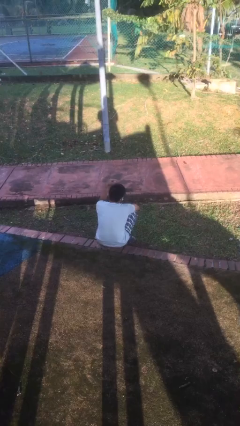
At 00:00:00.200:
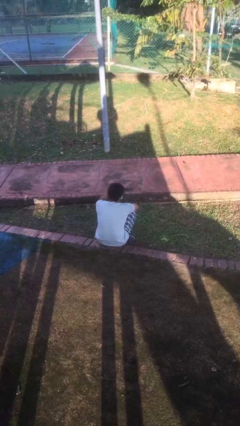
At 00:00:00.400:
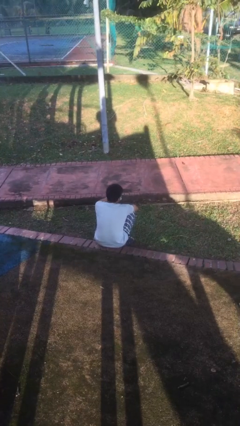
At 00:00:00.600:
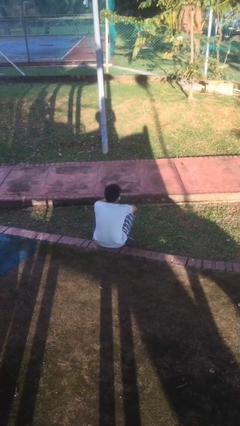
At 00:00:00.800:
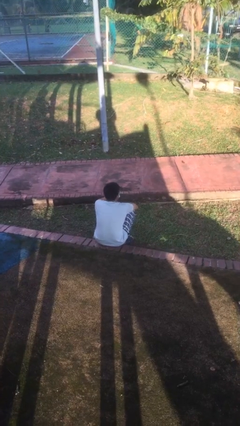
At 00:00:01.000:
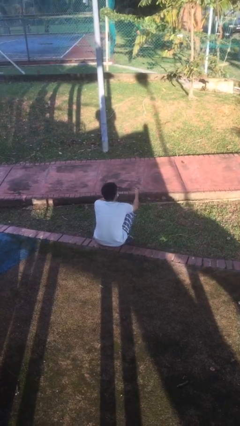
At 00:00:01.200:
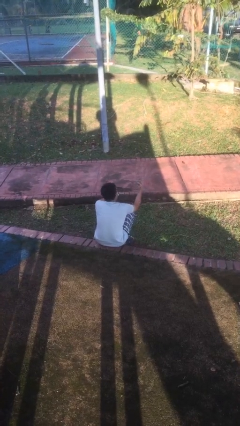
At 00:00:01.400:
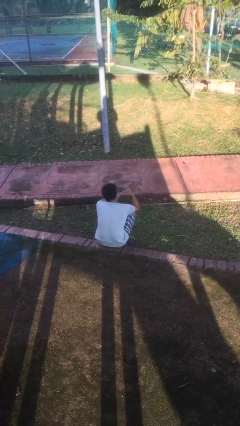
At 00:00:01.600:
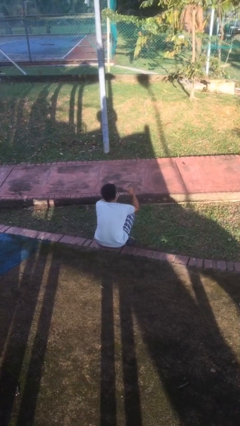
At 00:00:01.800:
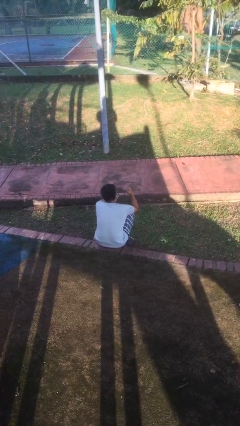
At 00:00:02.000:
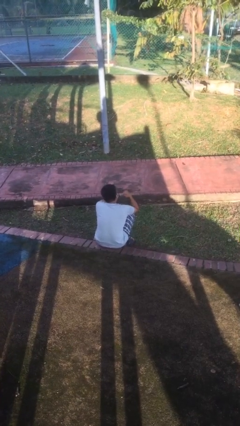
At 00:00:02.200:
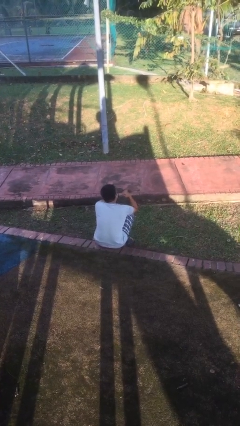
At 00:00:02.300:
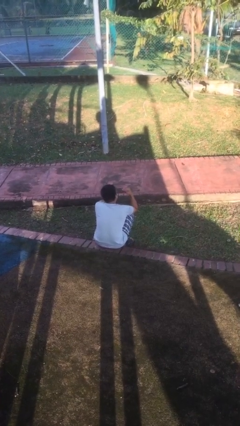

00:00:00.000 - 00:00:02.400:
person gestures listen closely

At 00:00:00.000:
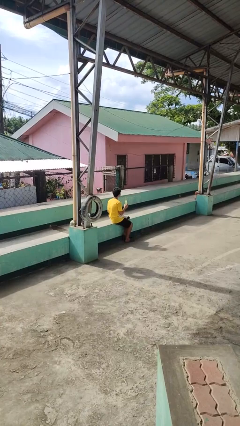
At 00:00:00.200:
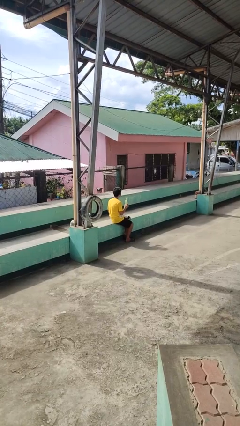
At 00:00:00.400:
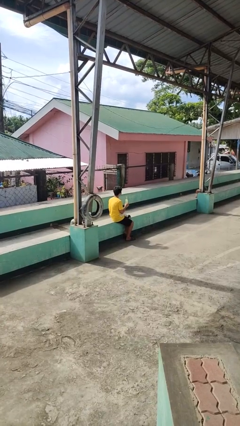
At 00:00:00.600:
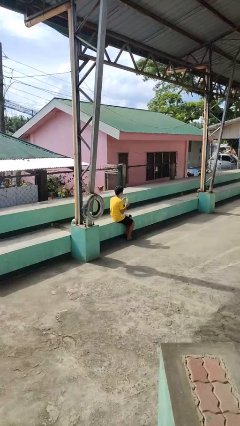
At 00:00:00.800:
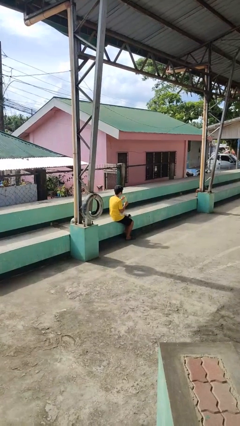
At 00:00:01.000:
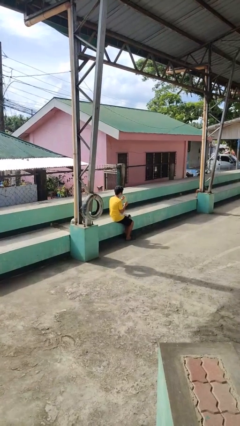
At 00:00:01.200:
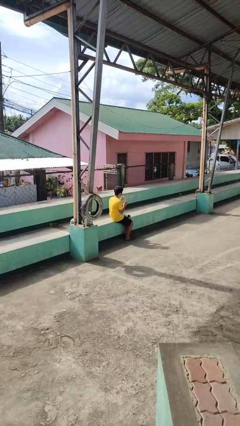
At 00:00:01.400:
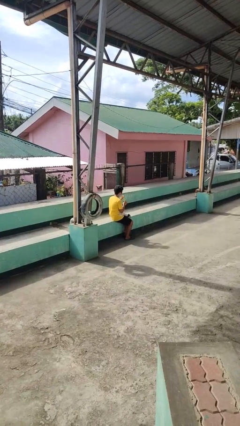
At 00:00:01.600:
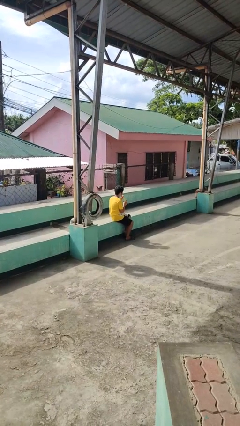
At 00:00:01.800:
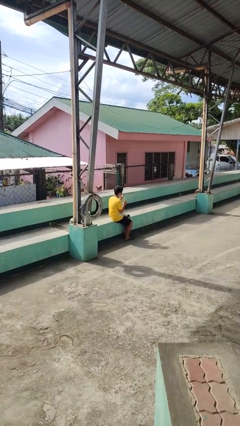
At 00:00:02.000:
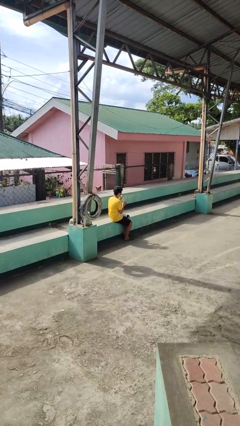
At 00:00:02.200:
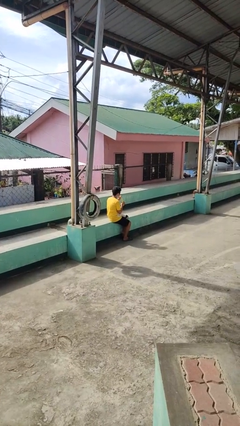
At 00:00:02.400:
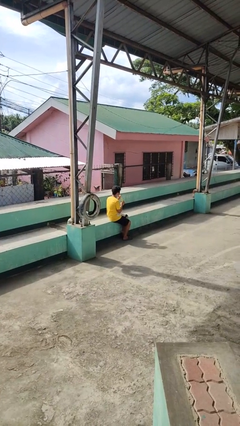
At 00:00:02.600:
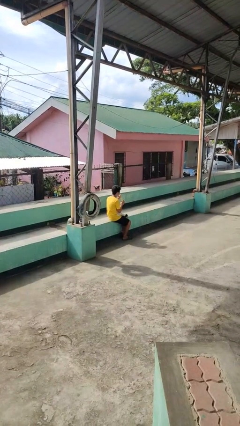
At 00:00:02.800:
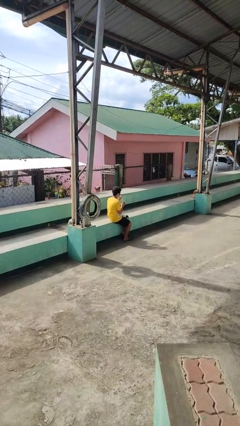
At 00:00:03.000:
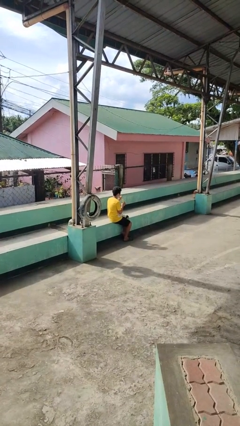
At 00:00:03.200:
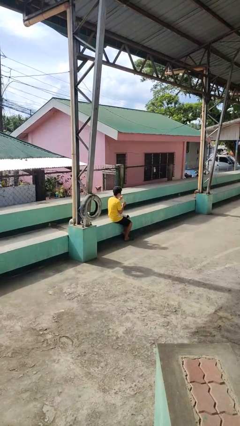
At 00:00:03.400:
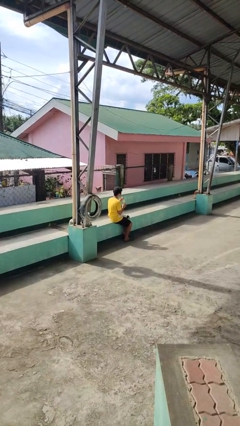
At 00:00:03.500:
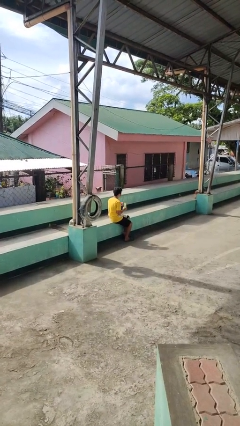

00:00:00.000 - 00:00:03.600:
person drinks from straw

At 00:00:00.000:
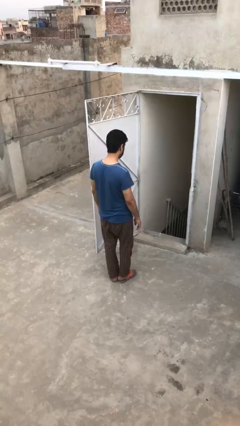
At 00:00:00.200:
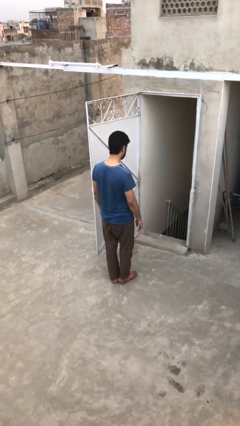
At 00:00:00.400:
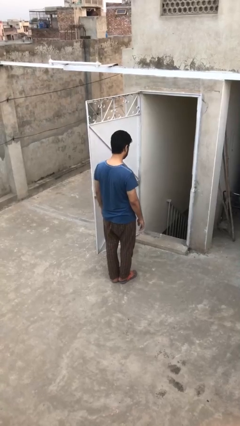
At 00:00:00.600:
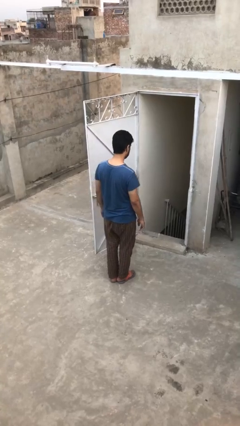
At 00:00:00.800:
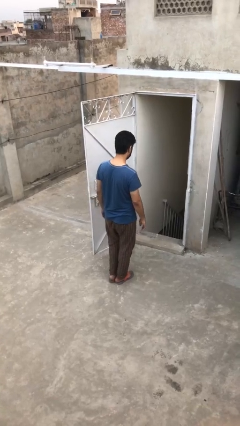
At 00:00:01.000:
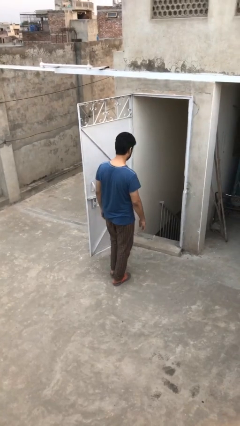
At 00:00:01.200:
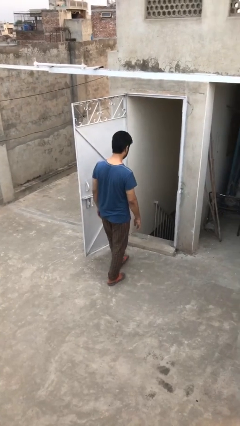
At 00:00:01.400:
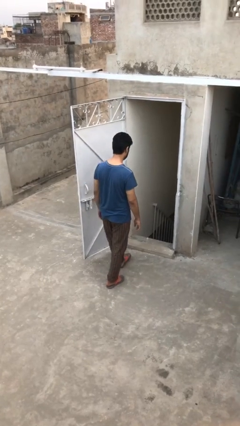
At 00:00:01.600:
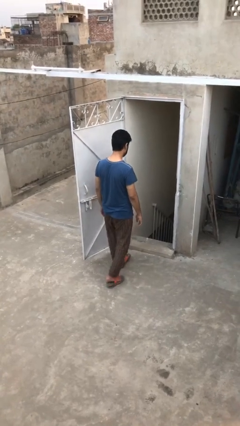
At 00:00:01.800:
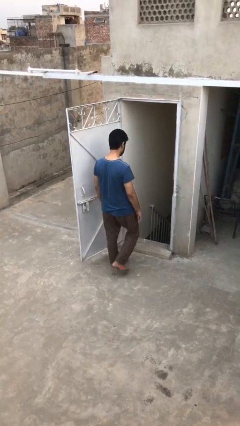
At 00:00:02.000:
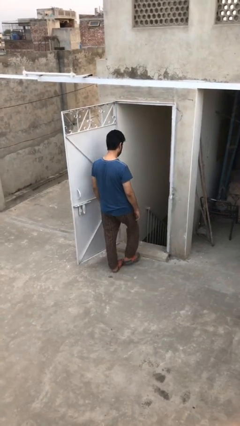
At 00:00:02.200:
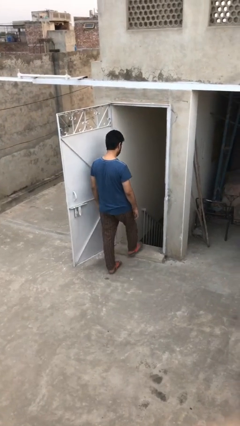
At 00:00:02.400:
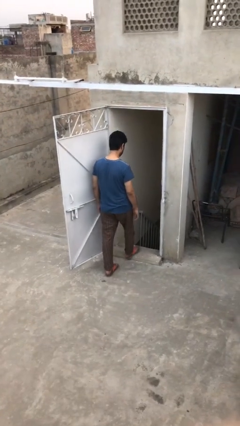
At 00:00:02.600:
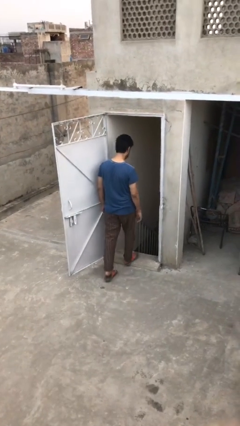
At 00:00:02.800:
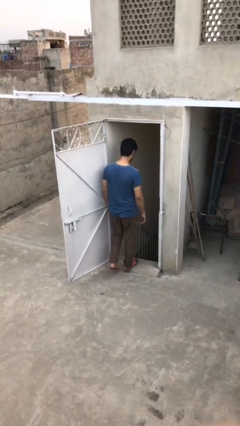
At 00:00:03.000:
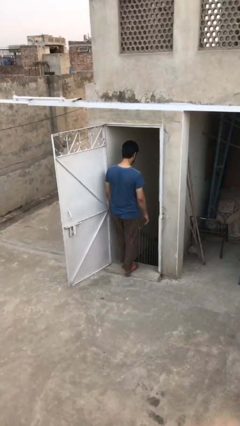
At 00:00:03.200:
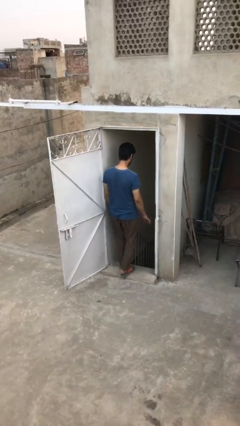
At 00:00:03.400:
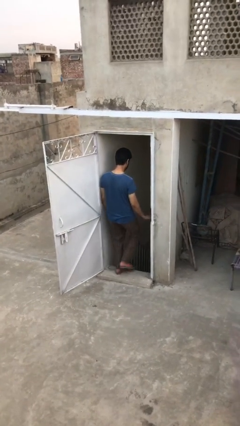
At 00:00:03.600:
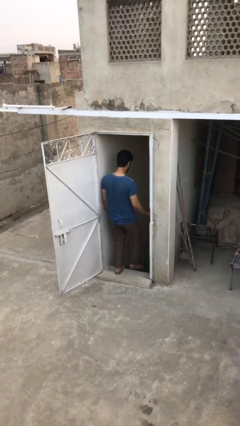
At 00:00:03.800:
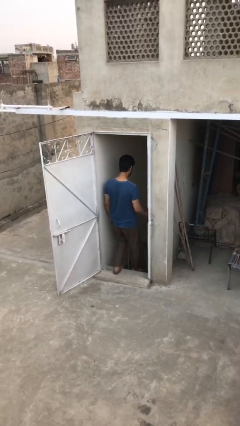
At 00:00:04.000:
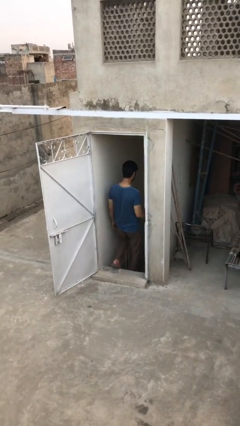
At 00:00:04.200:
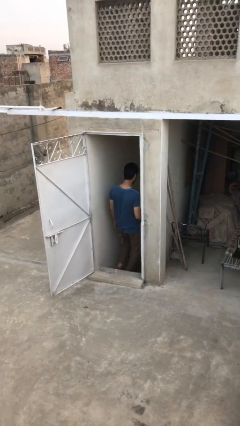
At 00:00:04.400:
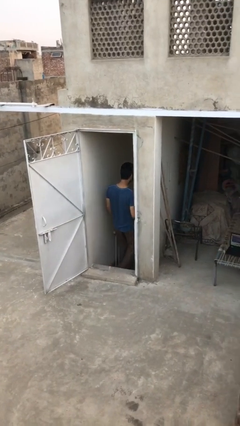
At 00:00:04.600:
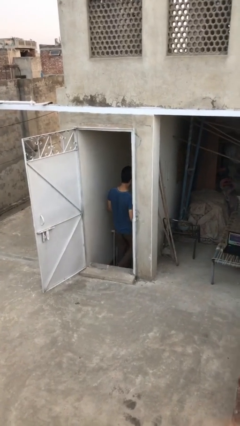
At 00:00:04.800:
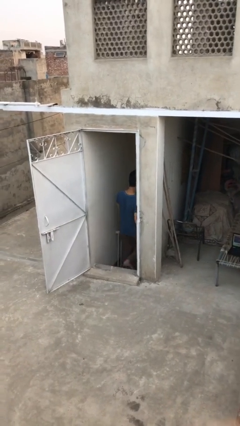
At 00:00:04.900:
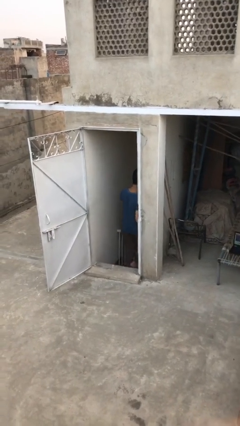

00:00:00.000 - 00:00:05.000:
person exits scene through structure

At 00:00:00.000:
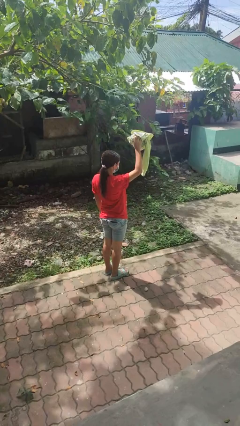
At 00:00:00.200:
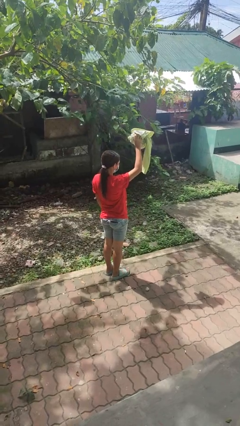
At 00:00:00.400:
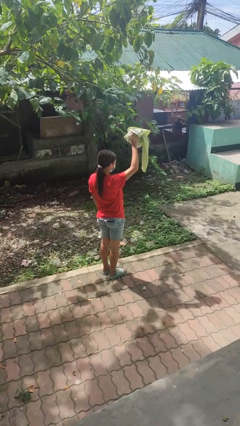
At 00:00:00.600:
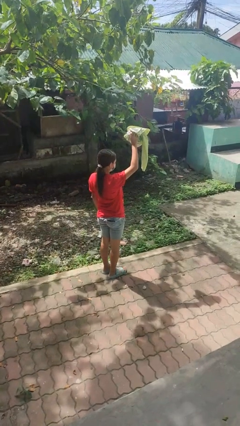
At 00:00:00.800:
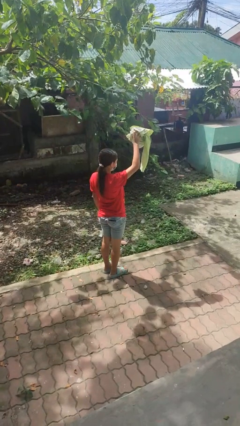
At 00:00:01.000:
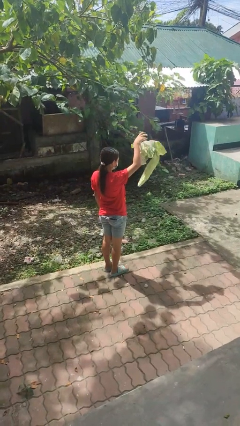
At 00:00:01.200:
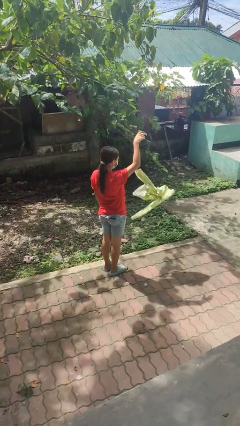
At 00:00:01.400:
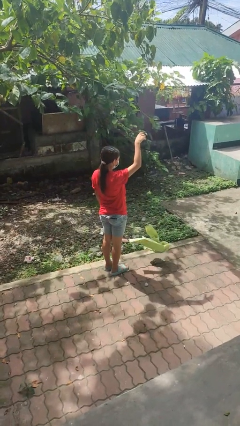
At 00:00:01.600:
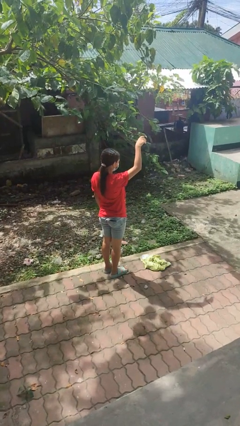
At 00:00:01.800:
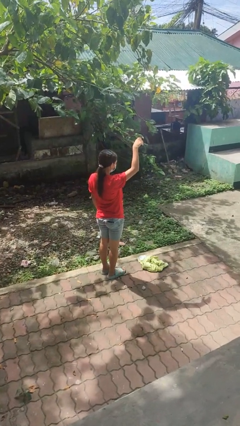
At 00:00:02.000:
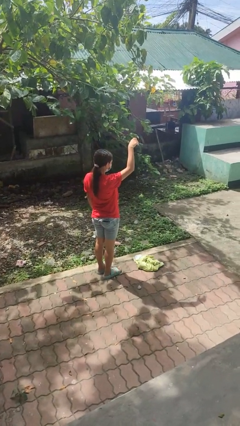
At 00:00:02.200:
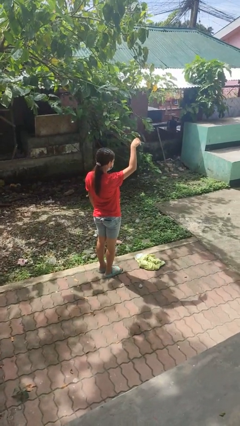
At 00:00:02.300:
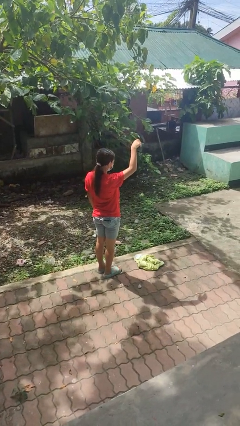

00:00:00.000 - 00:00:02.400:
person drops object

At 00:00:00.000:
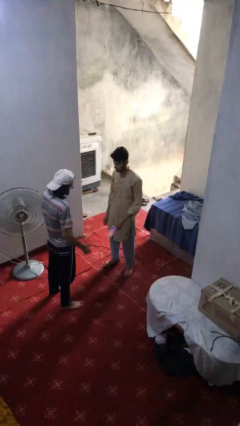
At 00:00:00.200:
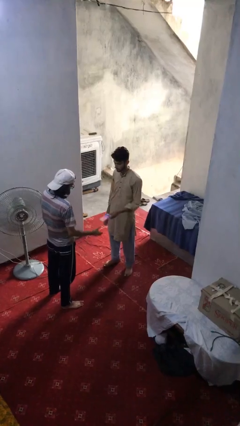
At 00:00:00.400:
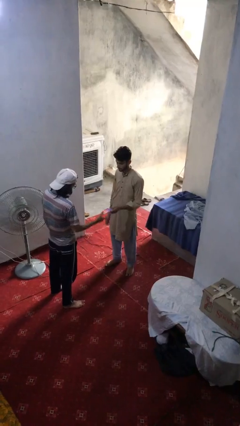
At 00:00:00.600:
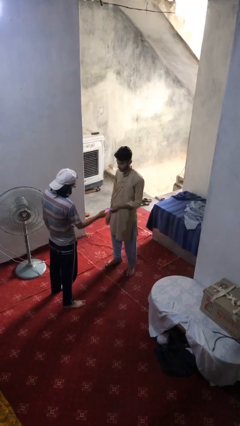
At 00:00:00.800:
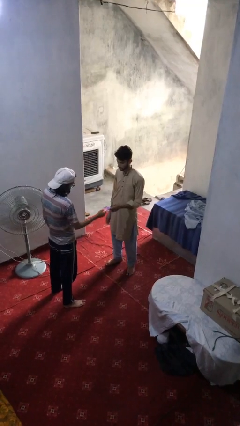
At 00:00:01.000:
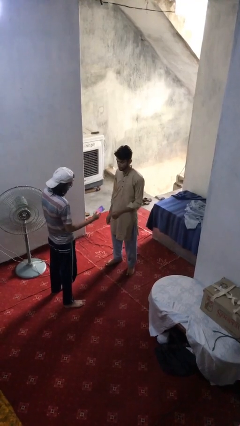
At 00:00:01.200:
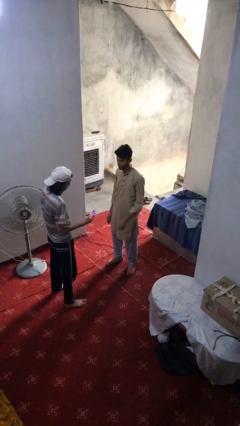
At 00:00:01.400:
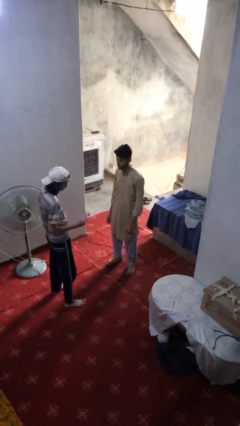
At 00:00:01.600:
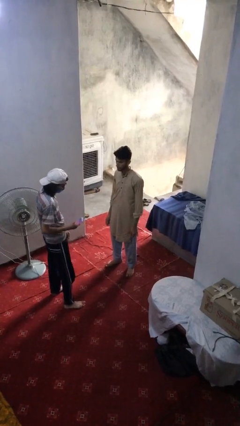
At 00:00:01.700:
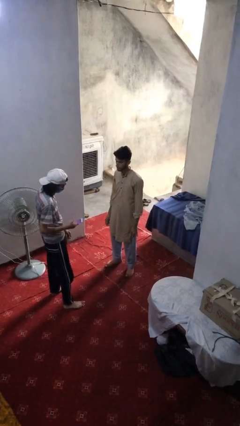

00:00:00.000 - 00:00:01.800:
person transfers object to person

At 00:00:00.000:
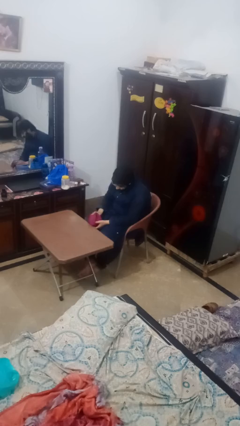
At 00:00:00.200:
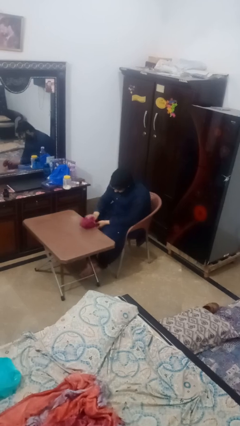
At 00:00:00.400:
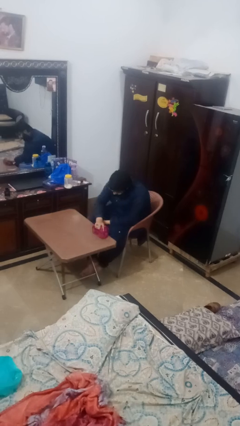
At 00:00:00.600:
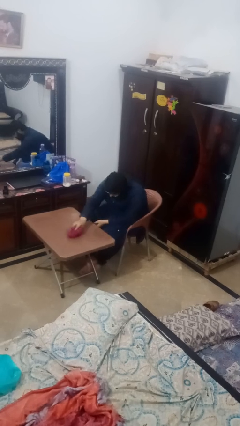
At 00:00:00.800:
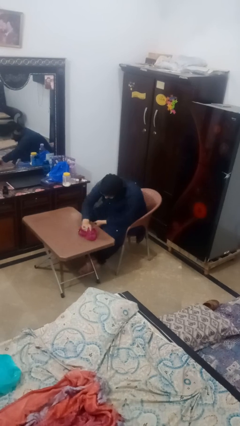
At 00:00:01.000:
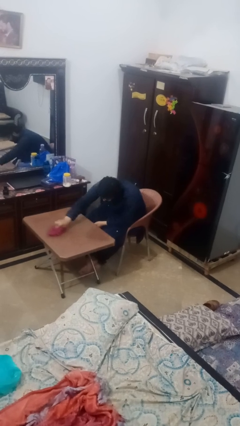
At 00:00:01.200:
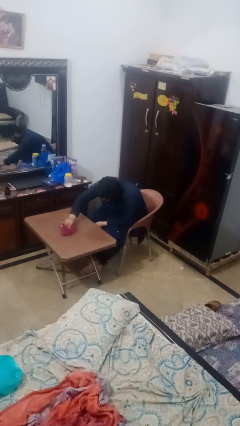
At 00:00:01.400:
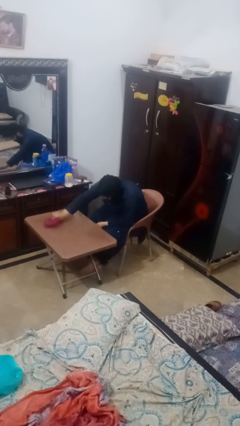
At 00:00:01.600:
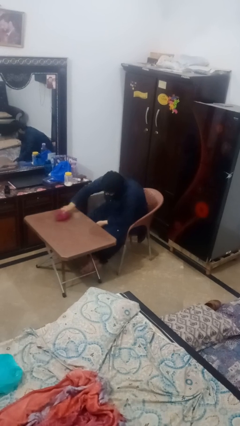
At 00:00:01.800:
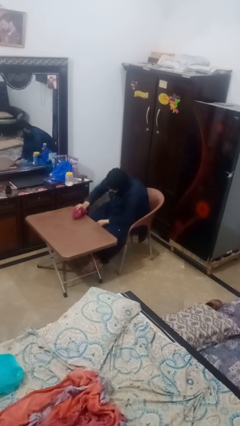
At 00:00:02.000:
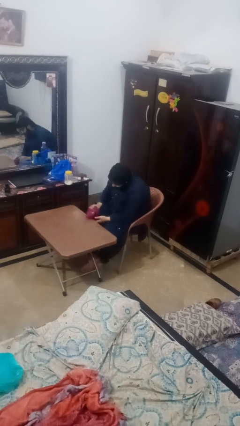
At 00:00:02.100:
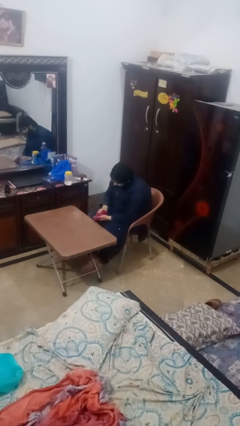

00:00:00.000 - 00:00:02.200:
person cleans table with rag
